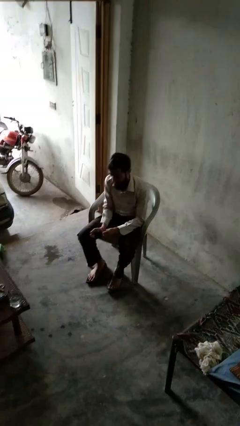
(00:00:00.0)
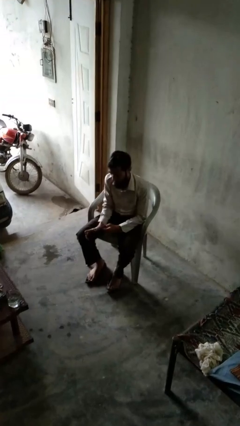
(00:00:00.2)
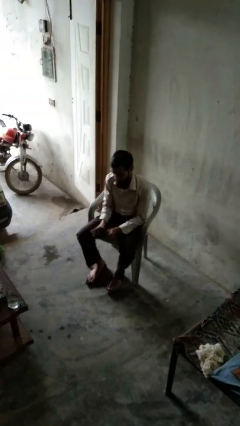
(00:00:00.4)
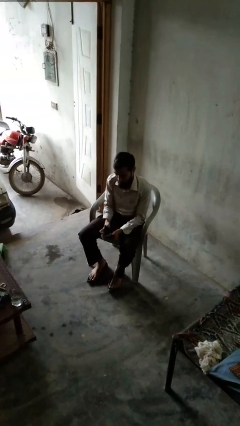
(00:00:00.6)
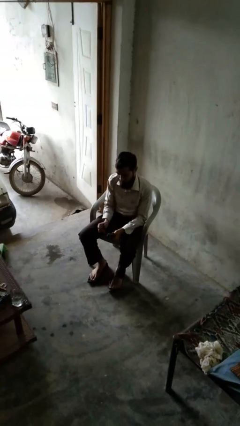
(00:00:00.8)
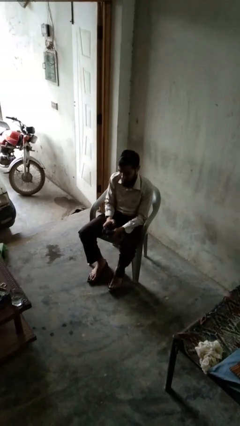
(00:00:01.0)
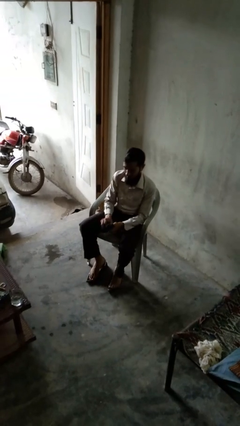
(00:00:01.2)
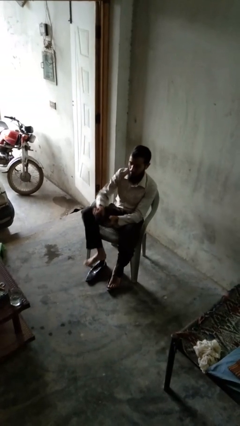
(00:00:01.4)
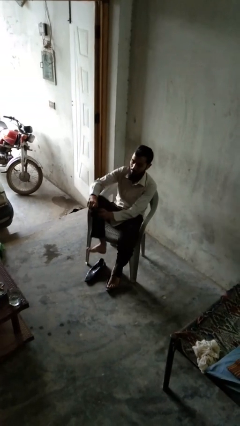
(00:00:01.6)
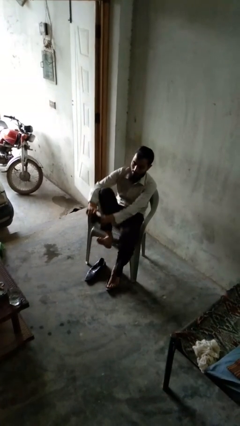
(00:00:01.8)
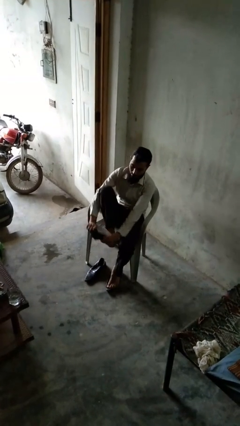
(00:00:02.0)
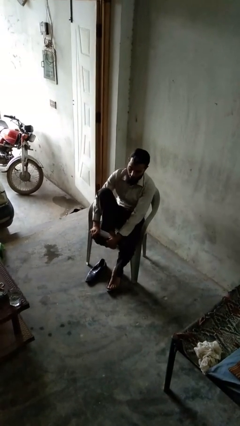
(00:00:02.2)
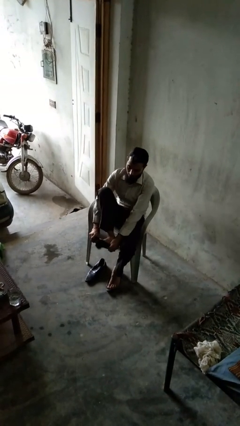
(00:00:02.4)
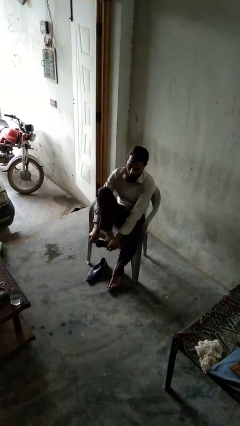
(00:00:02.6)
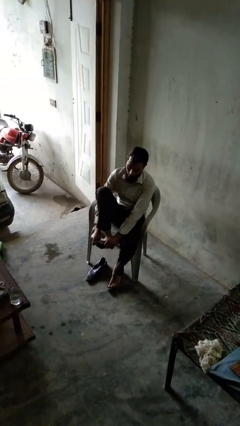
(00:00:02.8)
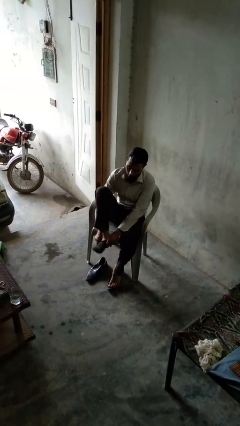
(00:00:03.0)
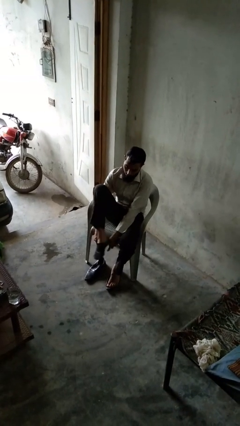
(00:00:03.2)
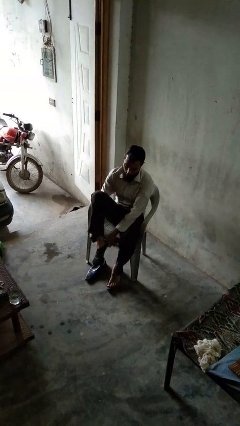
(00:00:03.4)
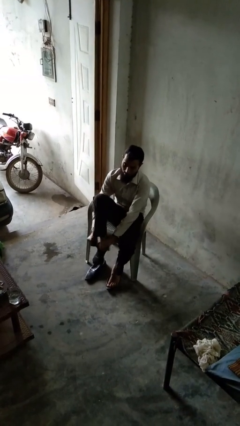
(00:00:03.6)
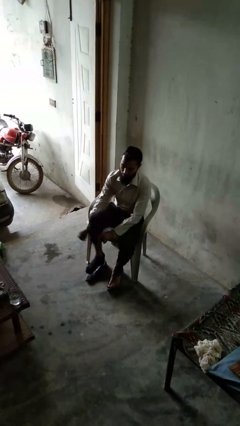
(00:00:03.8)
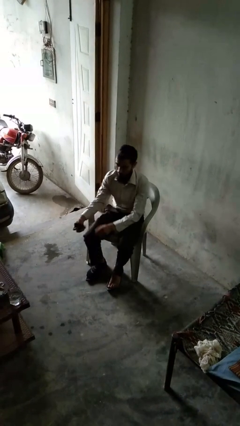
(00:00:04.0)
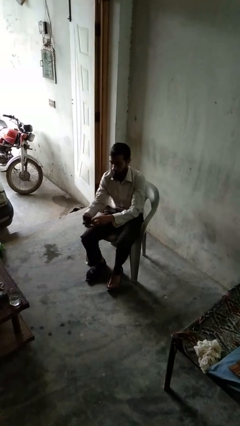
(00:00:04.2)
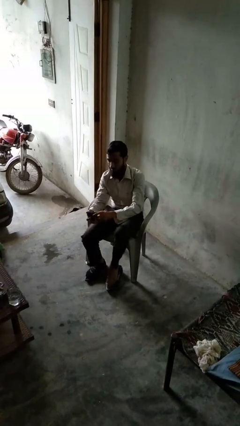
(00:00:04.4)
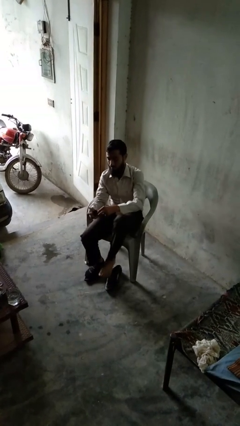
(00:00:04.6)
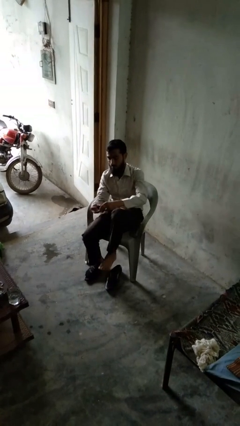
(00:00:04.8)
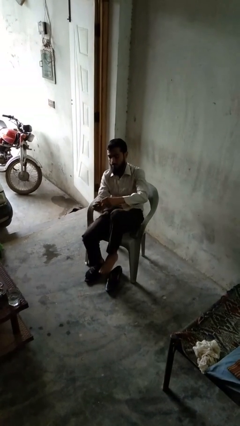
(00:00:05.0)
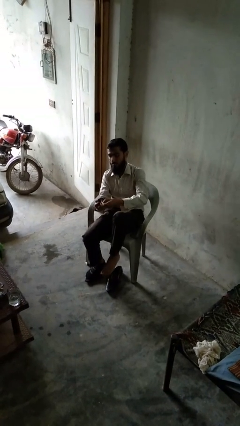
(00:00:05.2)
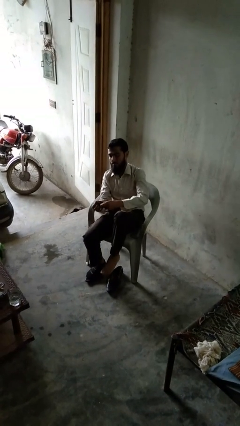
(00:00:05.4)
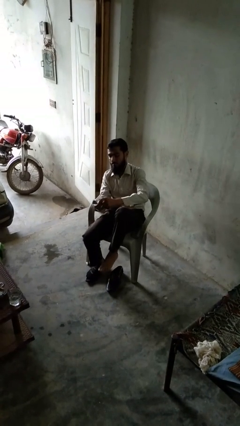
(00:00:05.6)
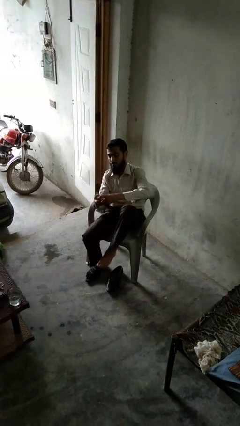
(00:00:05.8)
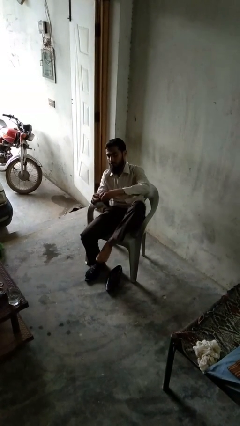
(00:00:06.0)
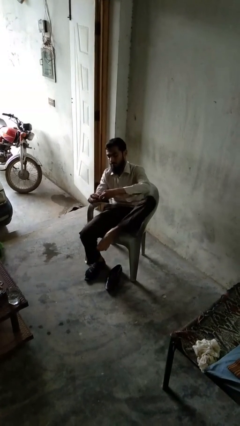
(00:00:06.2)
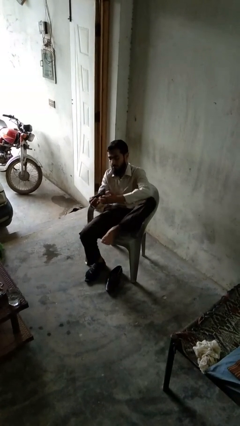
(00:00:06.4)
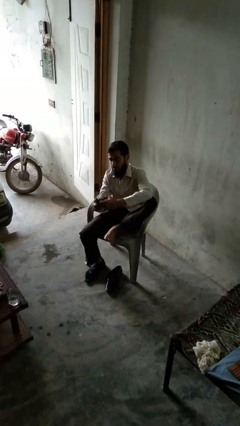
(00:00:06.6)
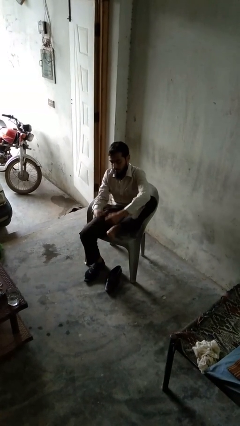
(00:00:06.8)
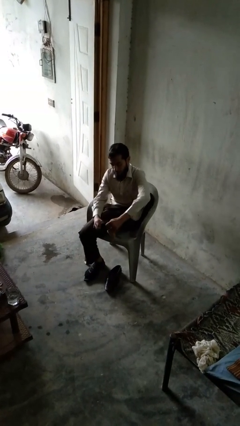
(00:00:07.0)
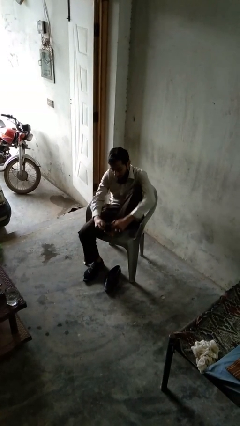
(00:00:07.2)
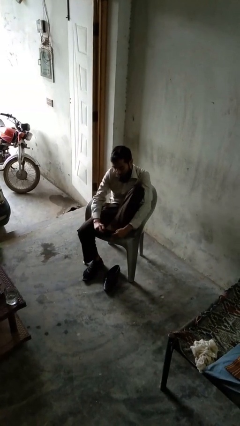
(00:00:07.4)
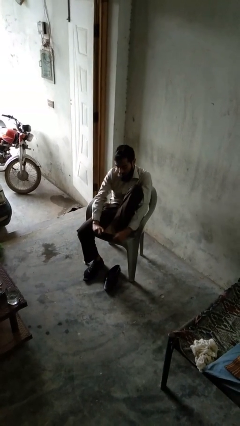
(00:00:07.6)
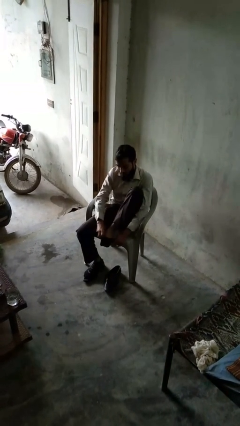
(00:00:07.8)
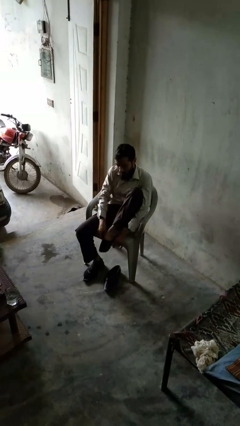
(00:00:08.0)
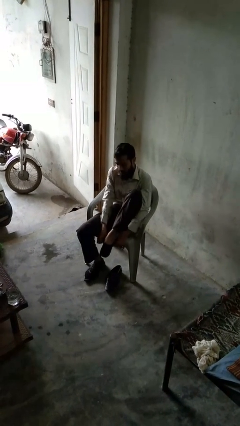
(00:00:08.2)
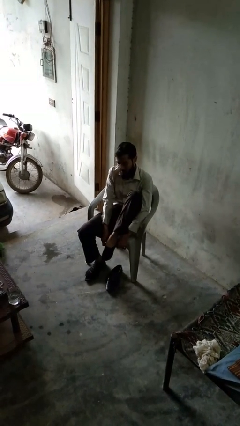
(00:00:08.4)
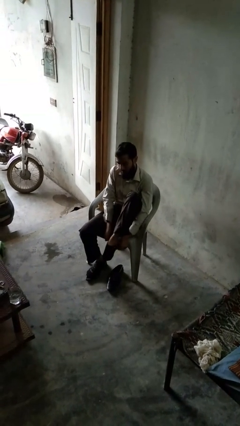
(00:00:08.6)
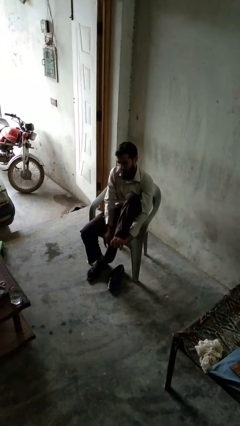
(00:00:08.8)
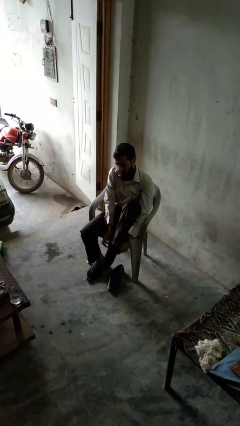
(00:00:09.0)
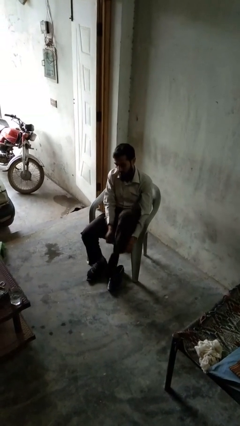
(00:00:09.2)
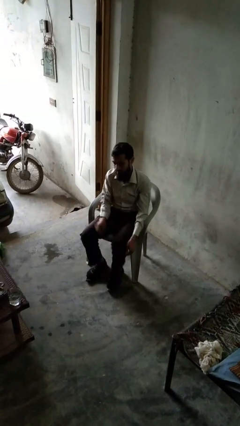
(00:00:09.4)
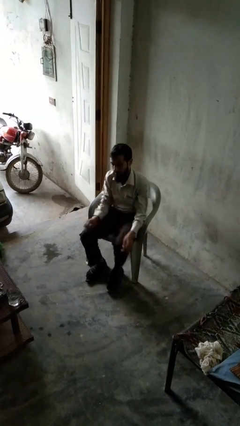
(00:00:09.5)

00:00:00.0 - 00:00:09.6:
person puts on socks

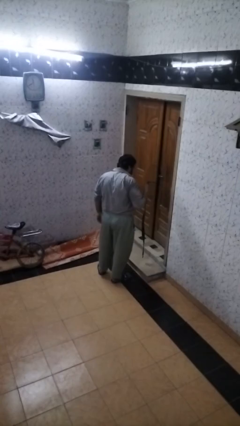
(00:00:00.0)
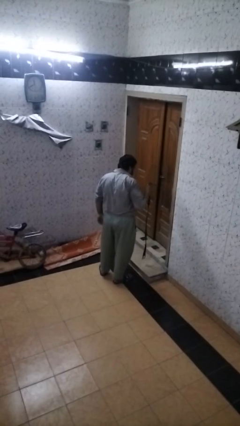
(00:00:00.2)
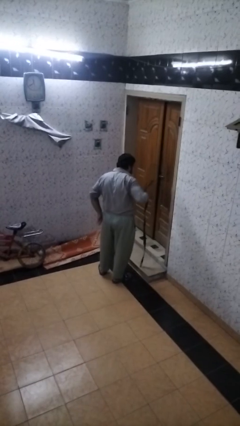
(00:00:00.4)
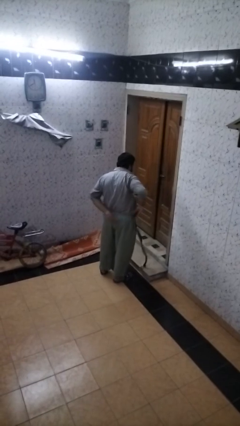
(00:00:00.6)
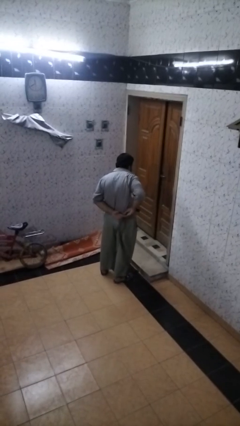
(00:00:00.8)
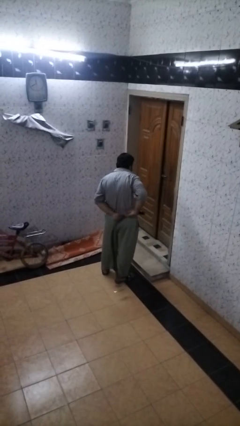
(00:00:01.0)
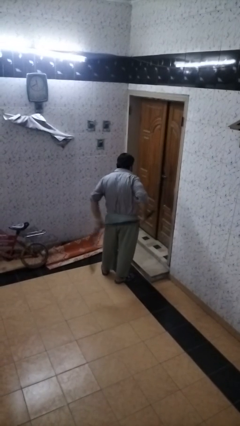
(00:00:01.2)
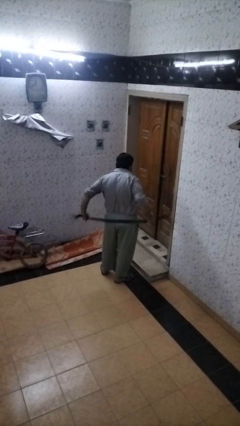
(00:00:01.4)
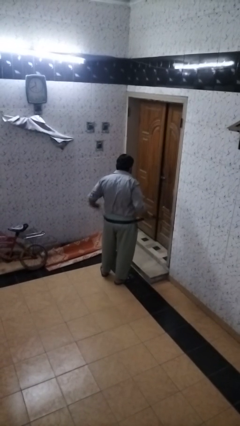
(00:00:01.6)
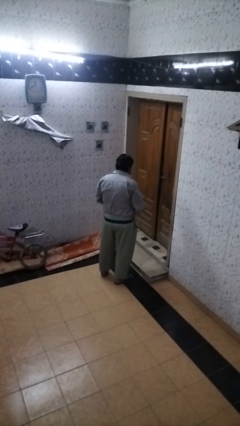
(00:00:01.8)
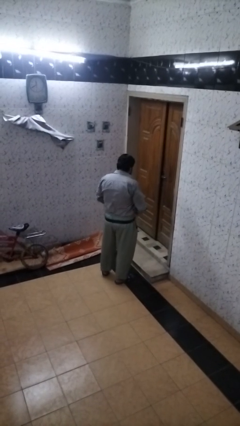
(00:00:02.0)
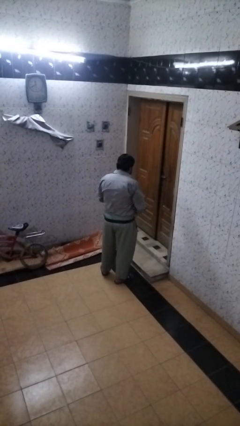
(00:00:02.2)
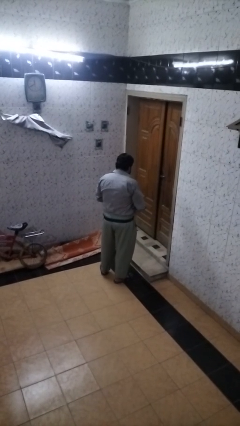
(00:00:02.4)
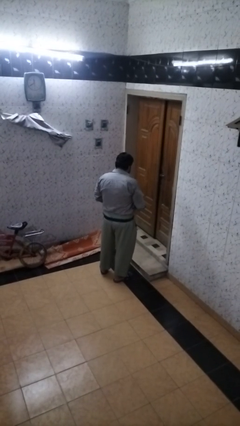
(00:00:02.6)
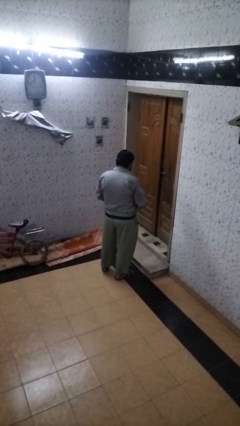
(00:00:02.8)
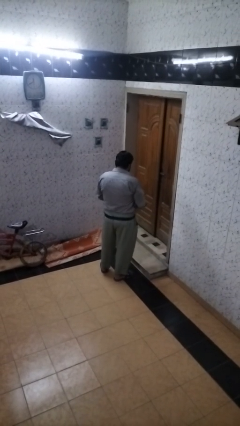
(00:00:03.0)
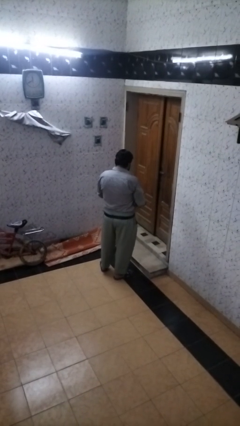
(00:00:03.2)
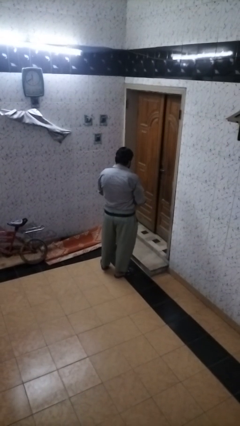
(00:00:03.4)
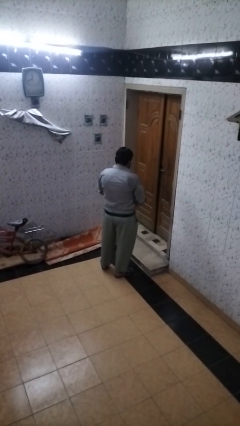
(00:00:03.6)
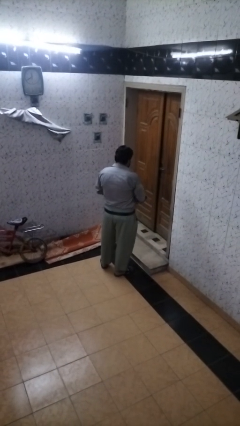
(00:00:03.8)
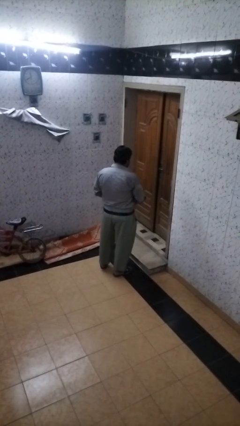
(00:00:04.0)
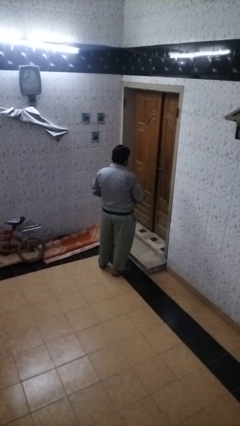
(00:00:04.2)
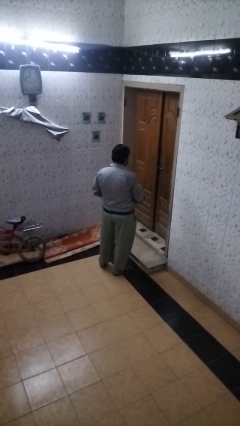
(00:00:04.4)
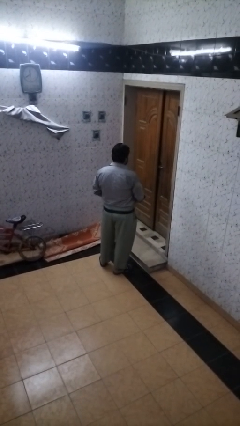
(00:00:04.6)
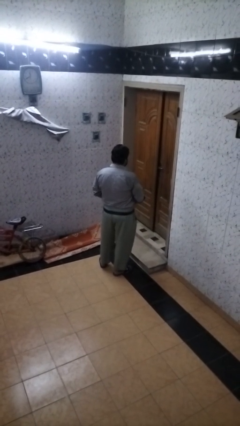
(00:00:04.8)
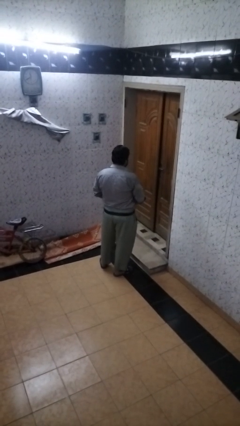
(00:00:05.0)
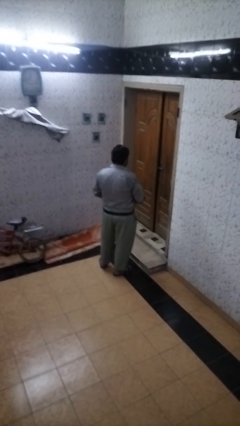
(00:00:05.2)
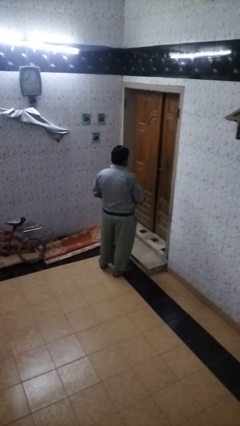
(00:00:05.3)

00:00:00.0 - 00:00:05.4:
person puts on belt

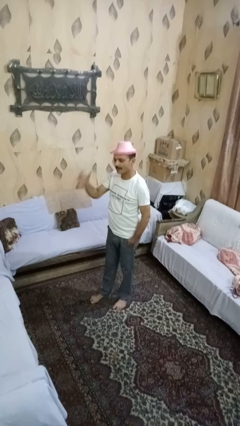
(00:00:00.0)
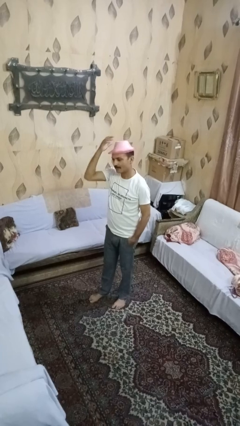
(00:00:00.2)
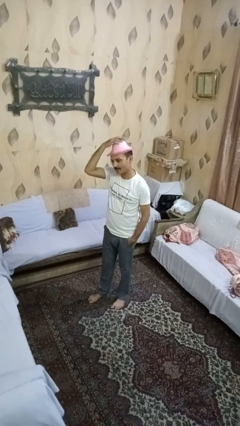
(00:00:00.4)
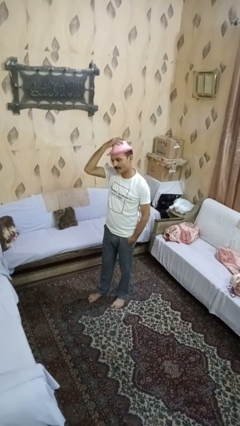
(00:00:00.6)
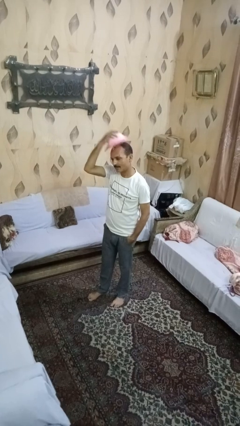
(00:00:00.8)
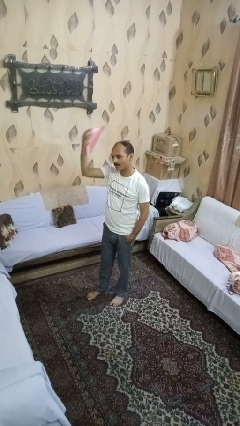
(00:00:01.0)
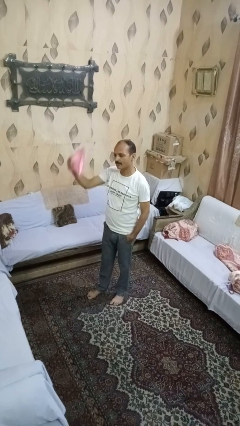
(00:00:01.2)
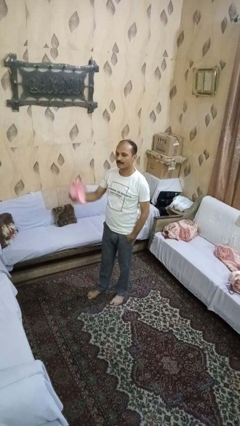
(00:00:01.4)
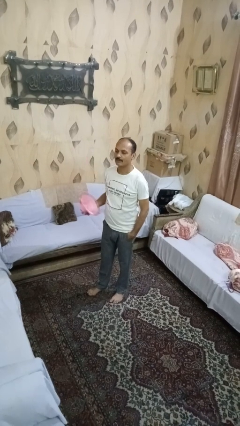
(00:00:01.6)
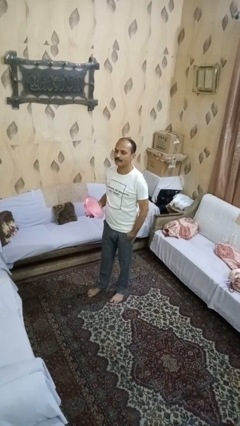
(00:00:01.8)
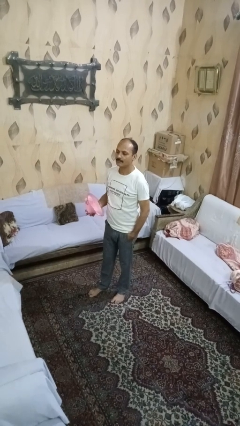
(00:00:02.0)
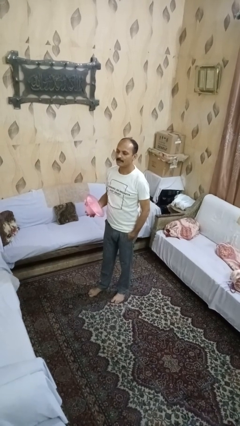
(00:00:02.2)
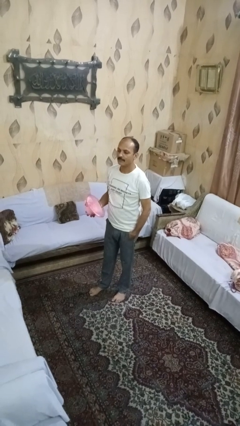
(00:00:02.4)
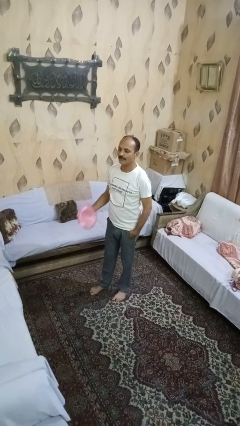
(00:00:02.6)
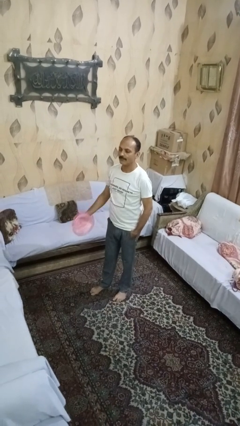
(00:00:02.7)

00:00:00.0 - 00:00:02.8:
person takes off hat

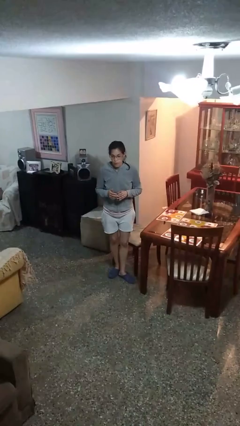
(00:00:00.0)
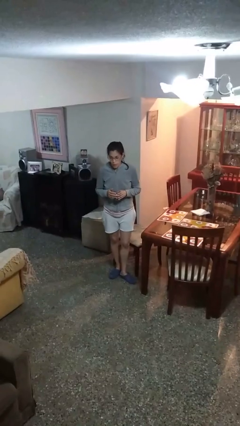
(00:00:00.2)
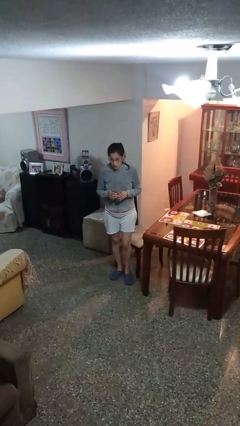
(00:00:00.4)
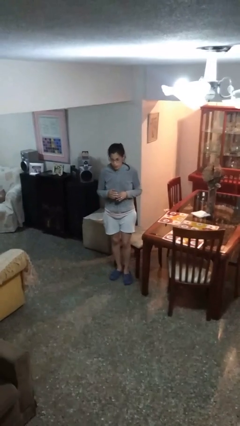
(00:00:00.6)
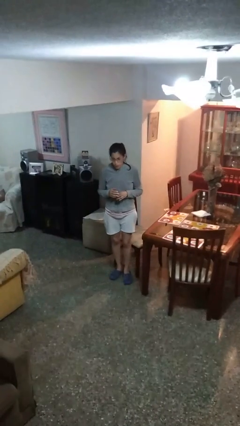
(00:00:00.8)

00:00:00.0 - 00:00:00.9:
person drinks from straw
